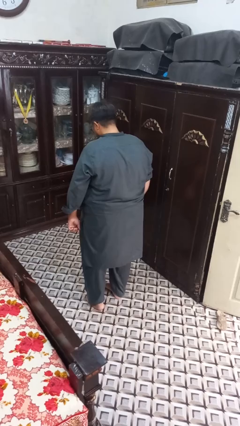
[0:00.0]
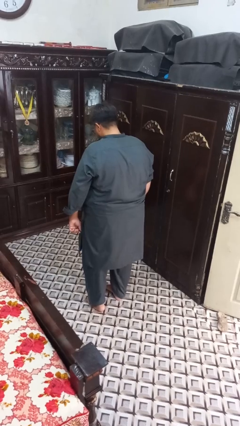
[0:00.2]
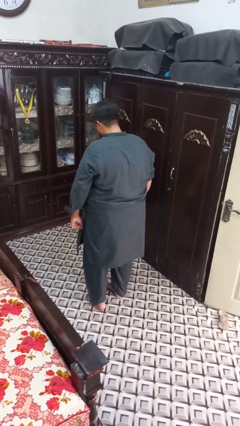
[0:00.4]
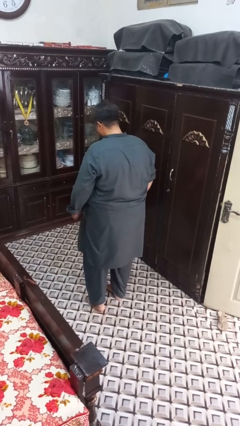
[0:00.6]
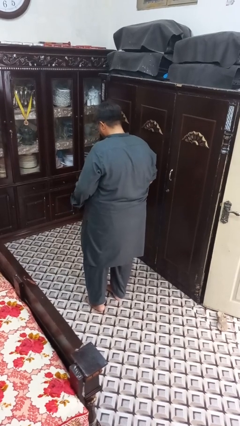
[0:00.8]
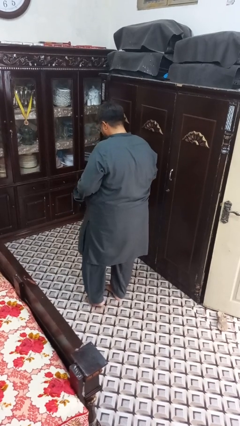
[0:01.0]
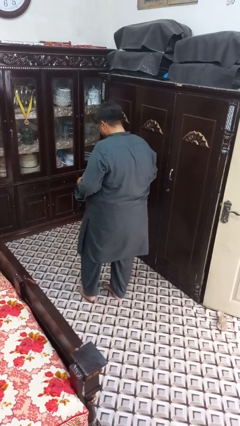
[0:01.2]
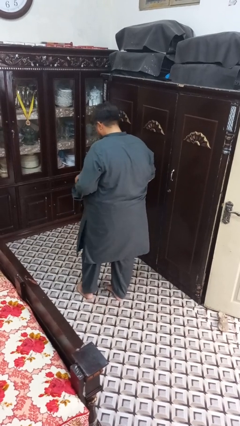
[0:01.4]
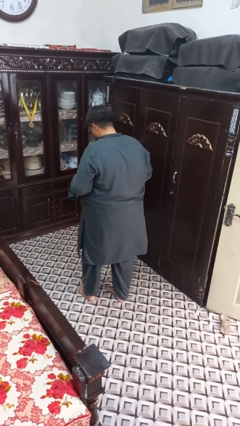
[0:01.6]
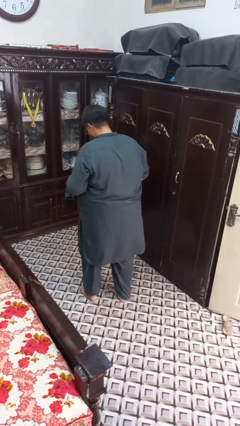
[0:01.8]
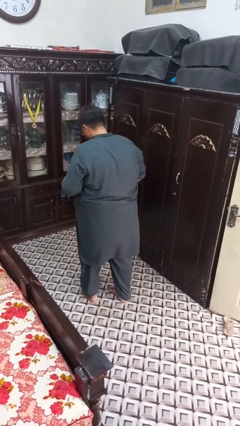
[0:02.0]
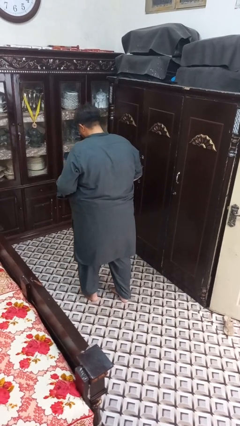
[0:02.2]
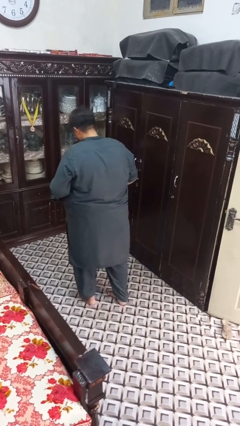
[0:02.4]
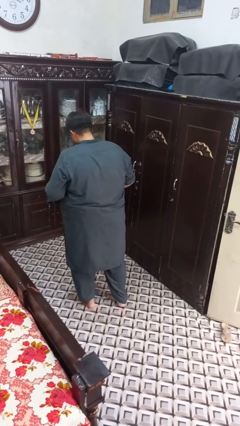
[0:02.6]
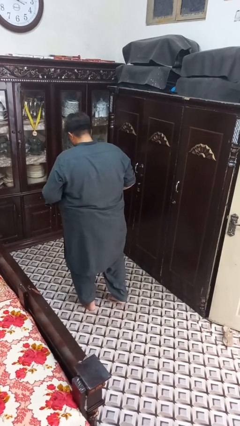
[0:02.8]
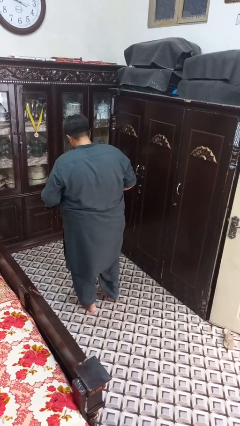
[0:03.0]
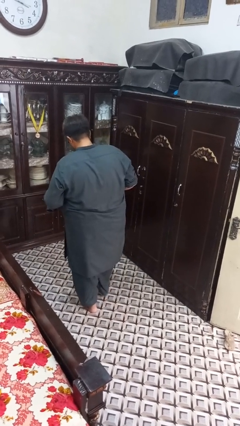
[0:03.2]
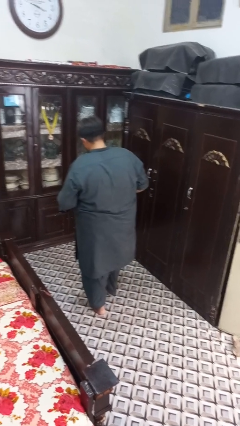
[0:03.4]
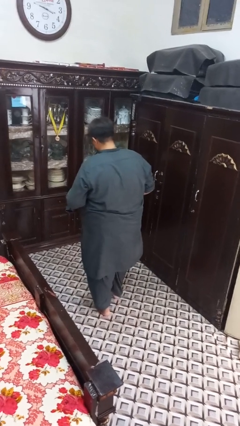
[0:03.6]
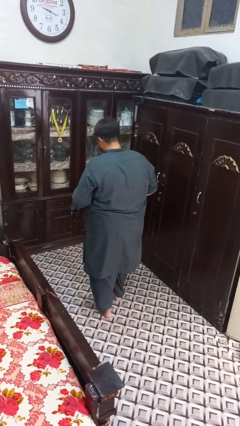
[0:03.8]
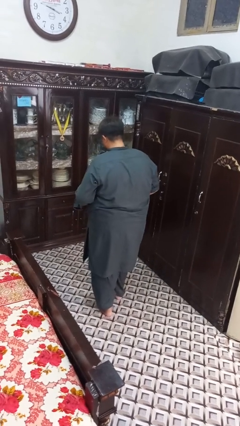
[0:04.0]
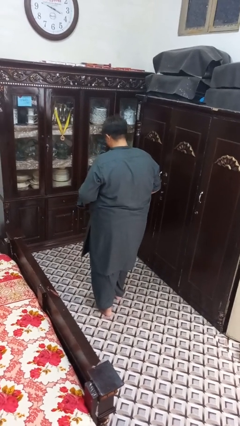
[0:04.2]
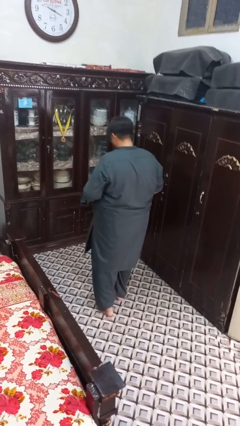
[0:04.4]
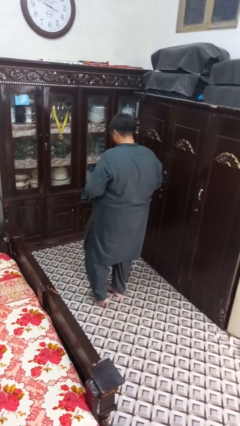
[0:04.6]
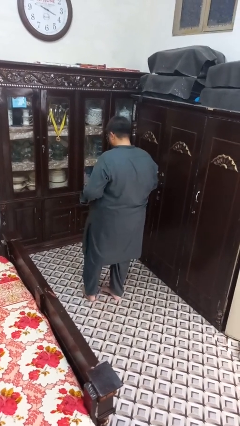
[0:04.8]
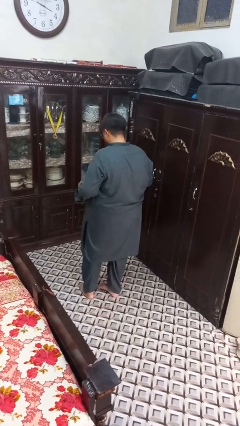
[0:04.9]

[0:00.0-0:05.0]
person walks tiptoe

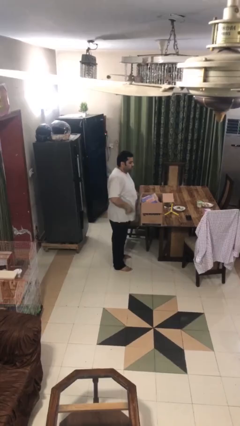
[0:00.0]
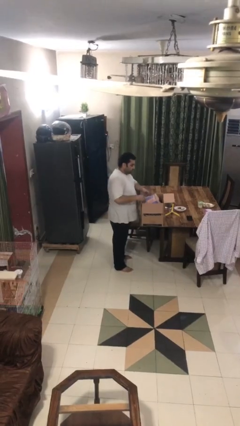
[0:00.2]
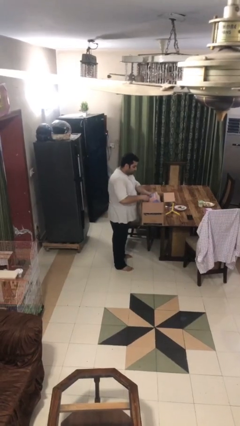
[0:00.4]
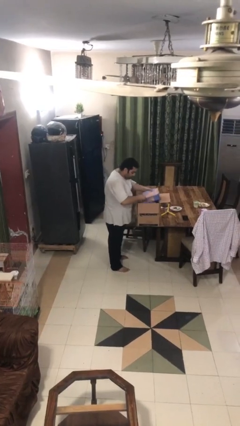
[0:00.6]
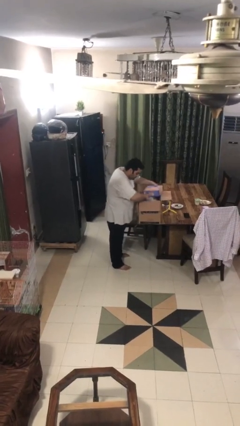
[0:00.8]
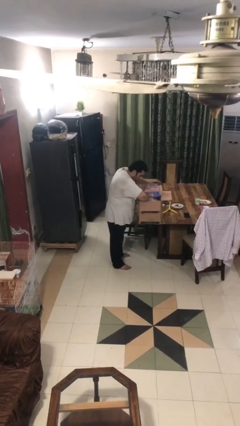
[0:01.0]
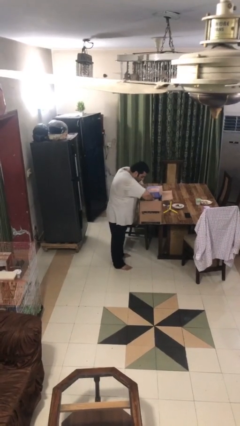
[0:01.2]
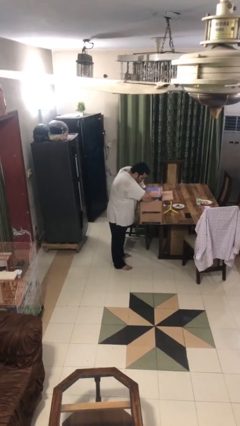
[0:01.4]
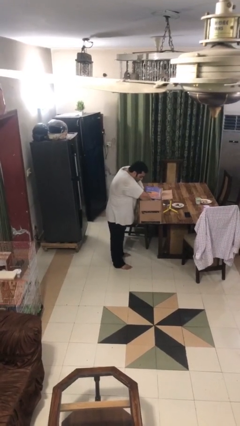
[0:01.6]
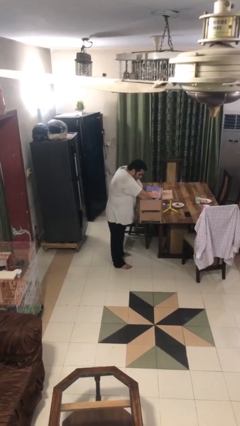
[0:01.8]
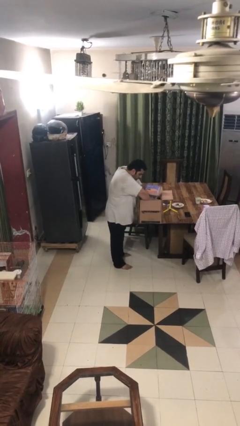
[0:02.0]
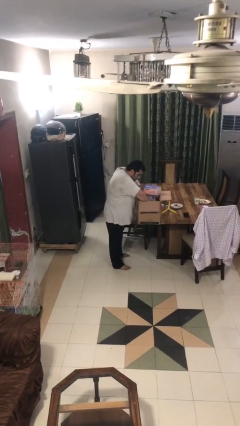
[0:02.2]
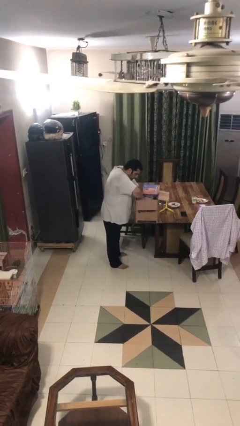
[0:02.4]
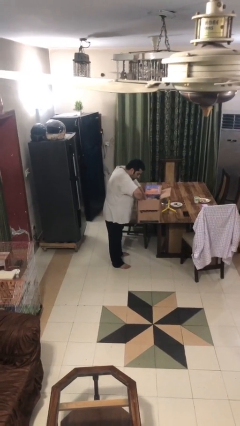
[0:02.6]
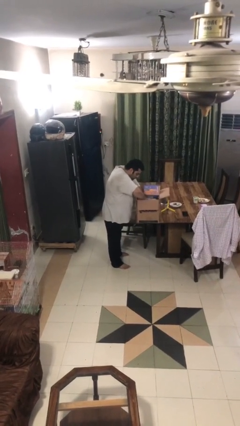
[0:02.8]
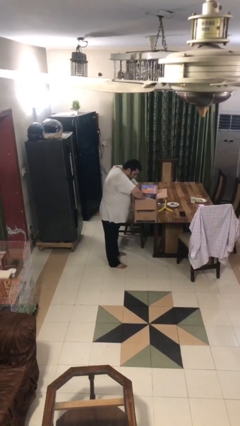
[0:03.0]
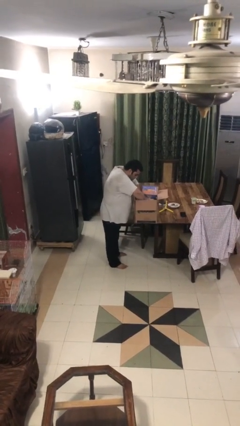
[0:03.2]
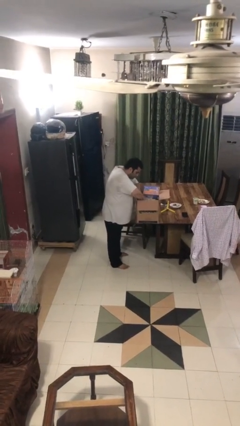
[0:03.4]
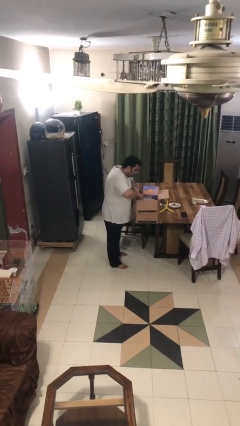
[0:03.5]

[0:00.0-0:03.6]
person searches in box

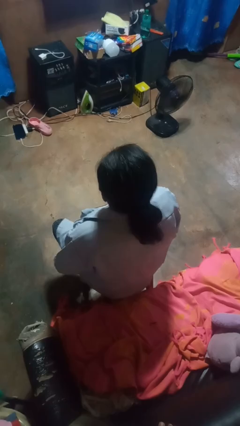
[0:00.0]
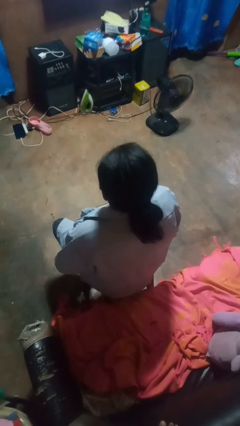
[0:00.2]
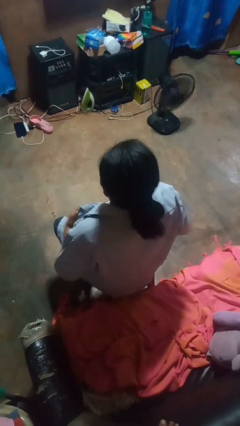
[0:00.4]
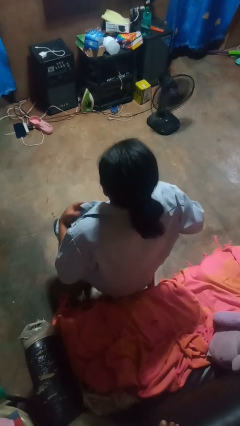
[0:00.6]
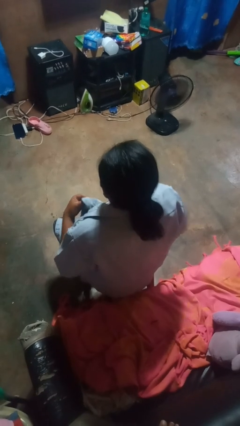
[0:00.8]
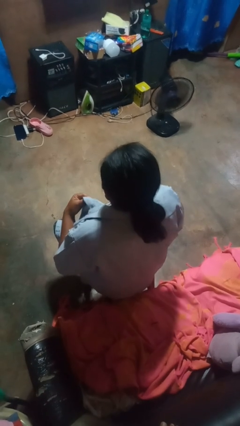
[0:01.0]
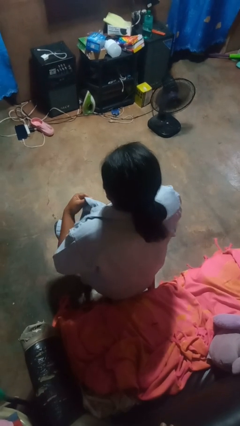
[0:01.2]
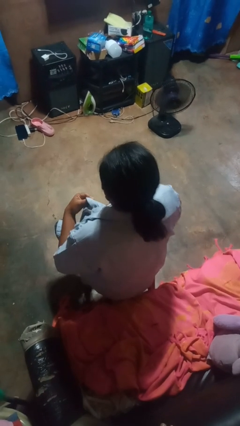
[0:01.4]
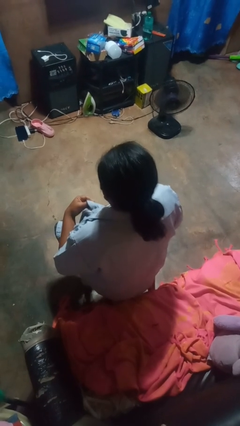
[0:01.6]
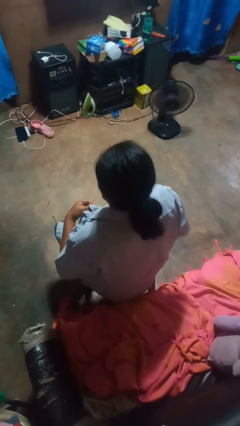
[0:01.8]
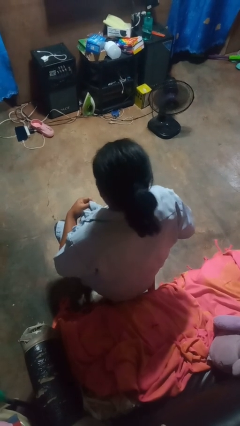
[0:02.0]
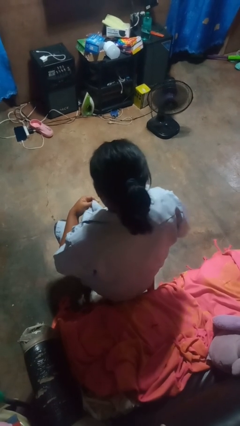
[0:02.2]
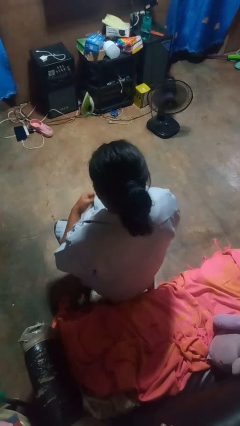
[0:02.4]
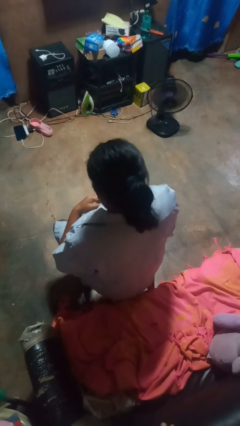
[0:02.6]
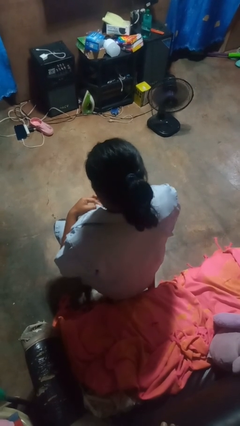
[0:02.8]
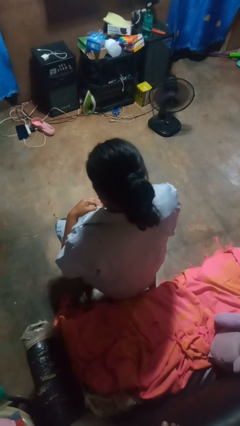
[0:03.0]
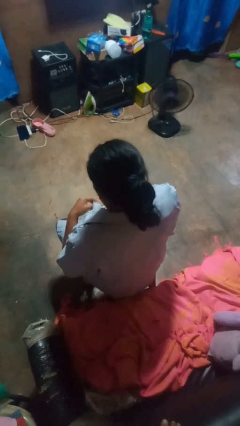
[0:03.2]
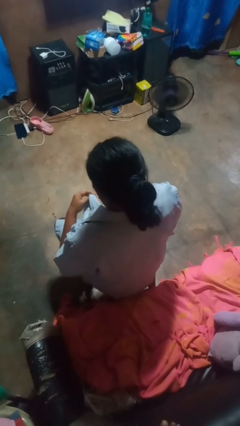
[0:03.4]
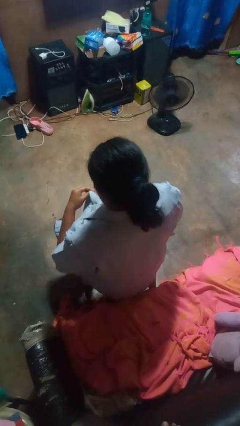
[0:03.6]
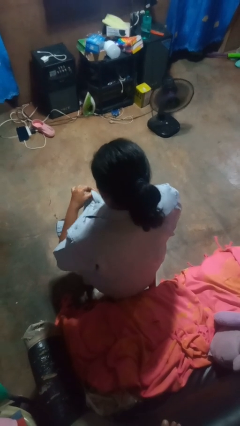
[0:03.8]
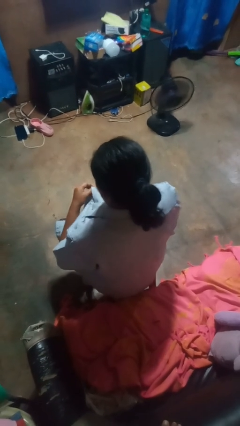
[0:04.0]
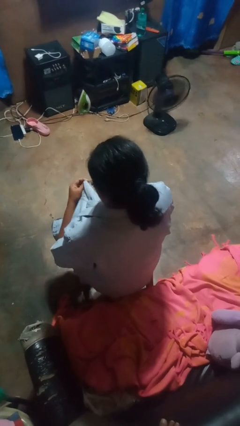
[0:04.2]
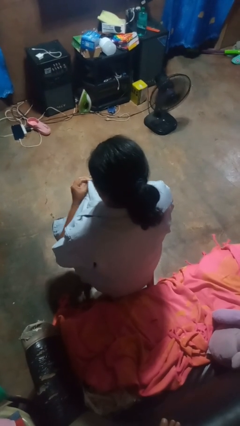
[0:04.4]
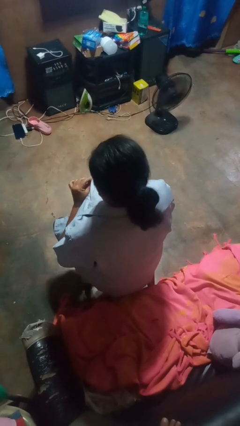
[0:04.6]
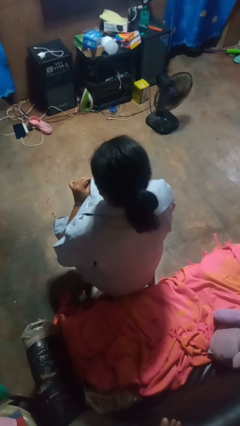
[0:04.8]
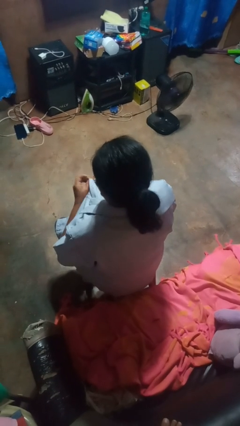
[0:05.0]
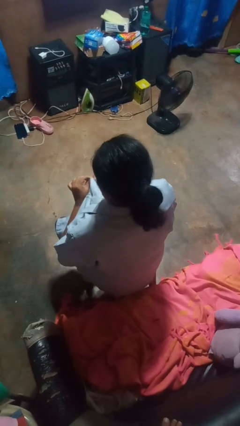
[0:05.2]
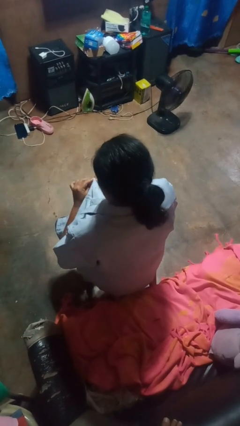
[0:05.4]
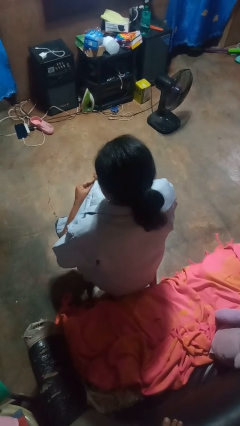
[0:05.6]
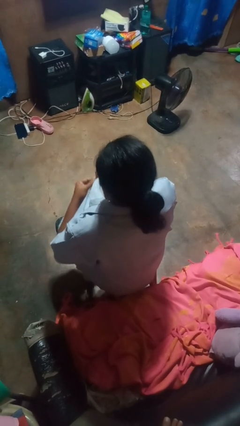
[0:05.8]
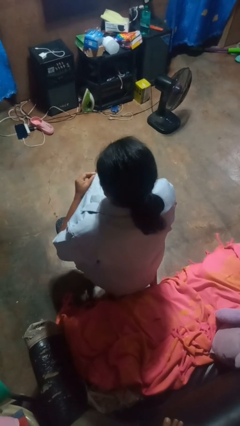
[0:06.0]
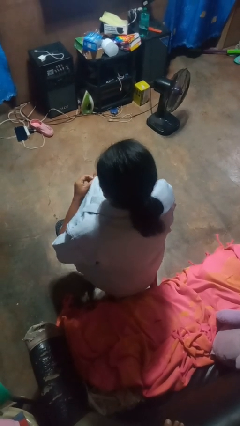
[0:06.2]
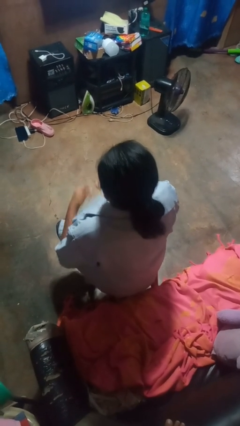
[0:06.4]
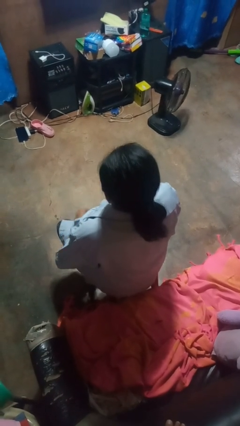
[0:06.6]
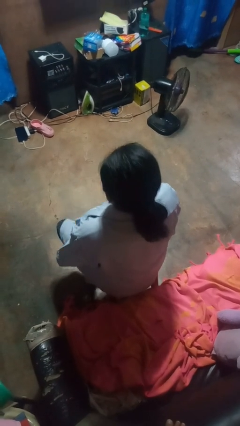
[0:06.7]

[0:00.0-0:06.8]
person buttons shirt

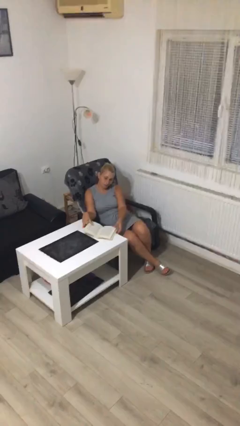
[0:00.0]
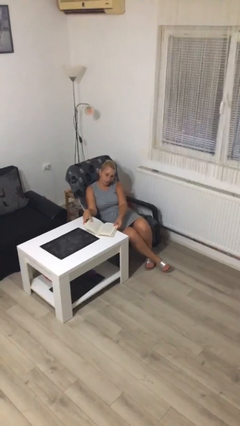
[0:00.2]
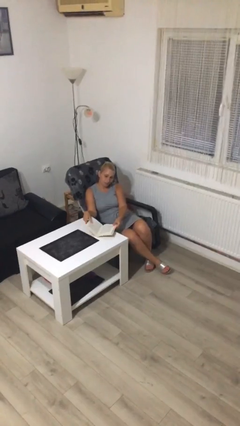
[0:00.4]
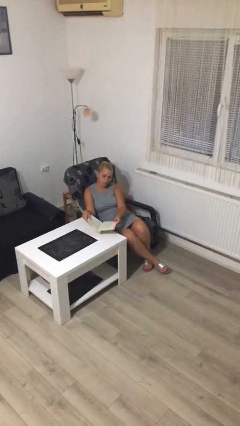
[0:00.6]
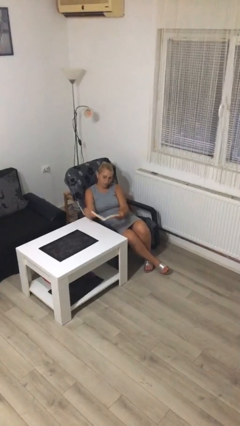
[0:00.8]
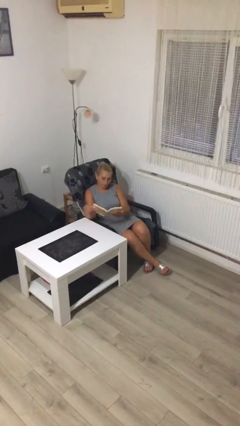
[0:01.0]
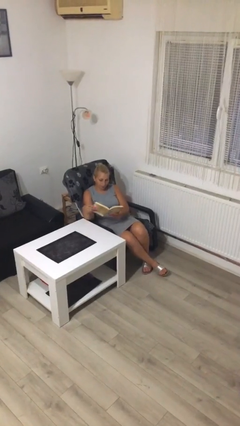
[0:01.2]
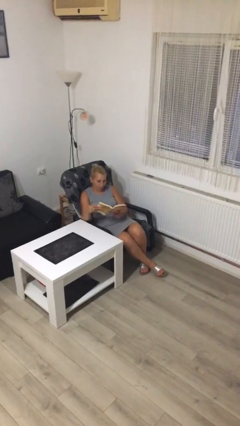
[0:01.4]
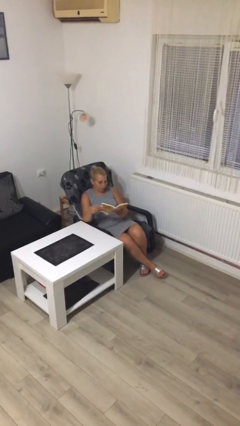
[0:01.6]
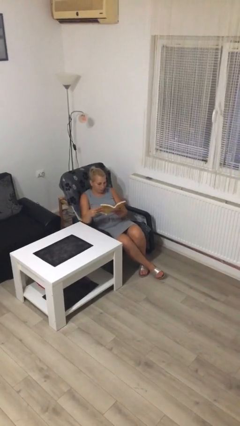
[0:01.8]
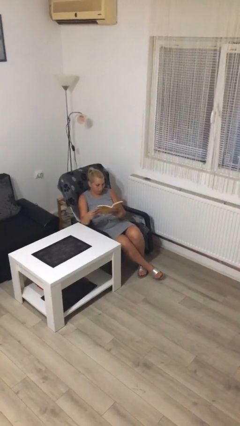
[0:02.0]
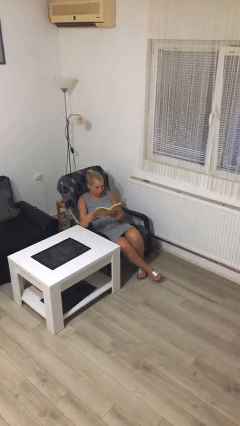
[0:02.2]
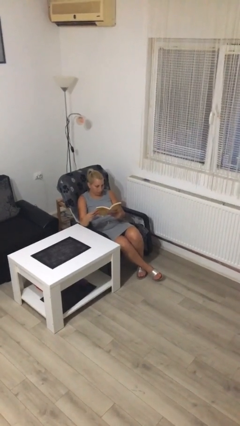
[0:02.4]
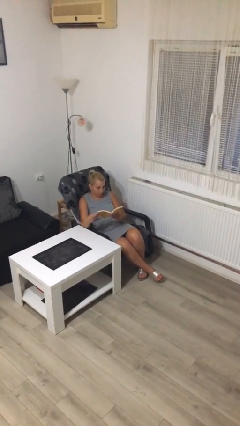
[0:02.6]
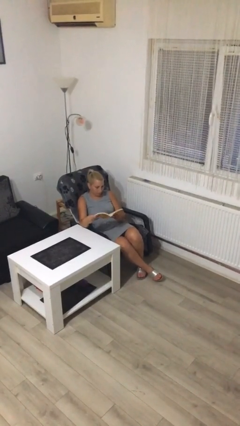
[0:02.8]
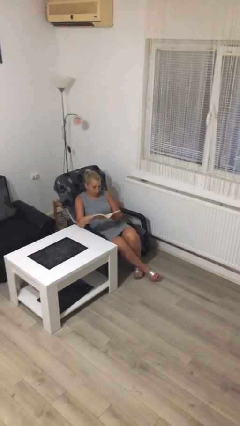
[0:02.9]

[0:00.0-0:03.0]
person picks up object from table
